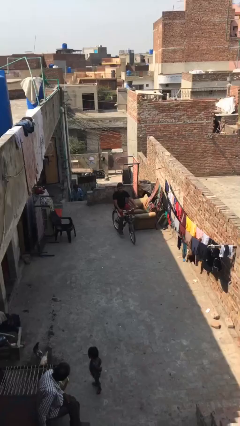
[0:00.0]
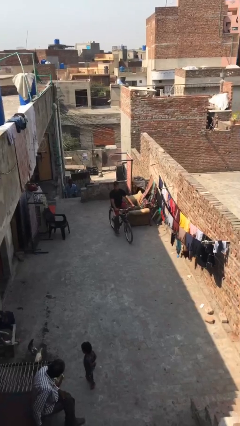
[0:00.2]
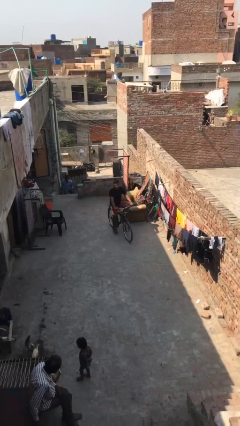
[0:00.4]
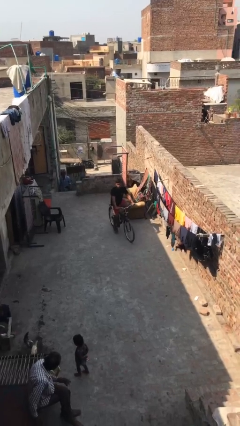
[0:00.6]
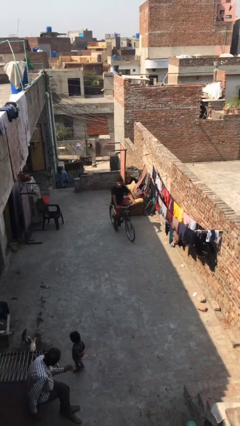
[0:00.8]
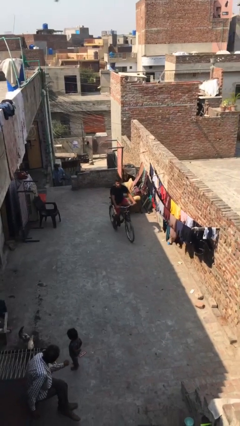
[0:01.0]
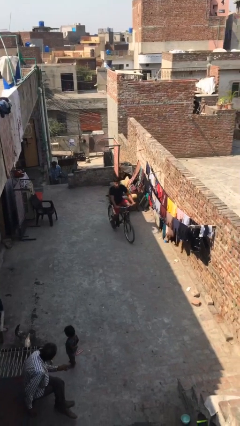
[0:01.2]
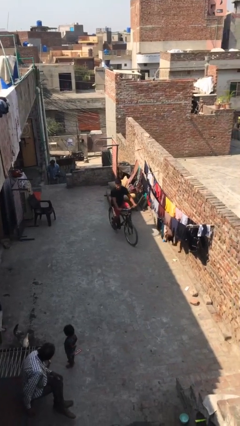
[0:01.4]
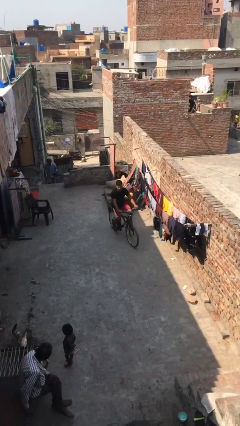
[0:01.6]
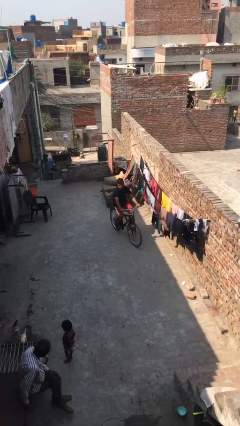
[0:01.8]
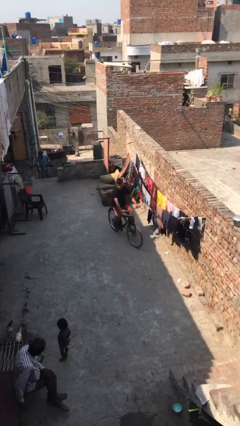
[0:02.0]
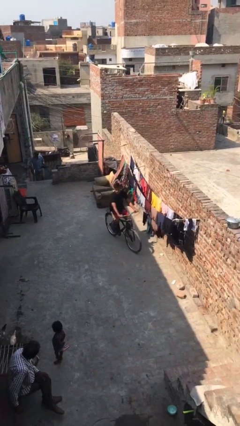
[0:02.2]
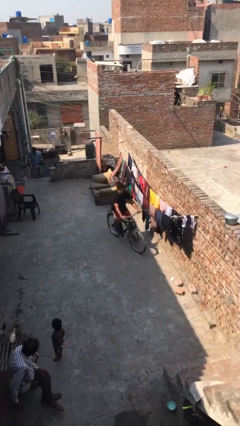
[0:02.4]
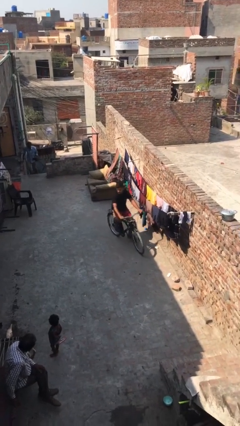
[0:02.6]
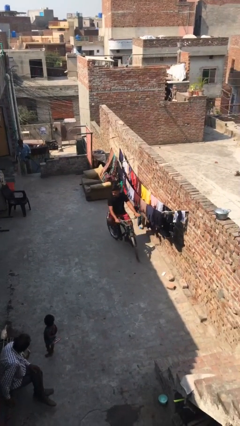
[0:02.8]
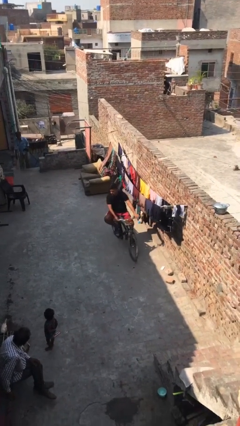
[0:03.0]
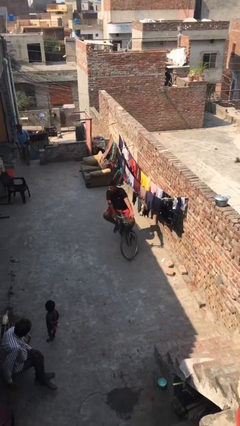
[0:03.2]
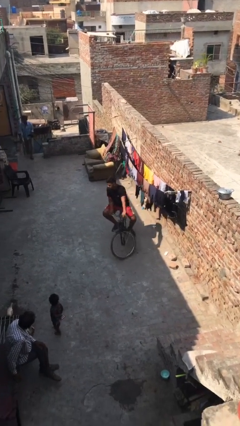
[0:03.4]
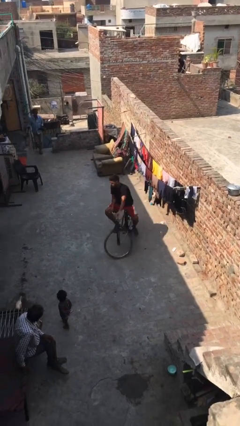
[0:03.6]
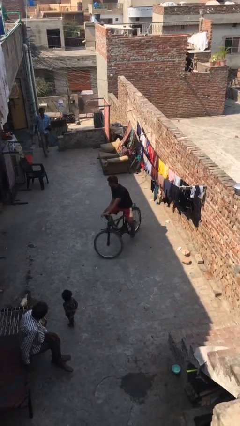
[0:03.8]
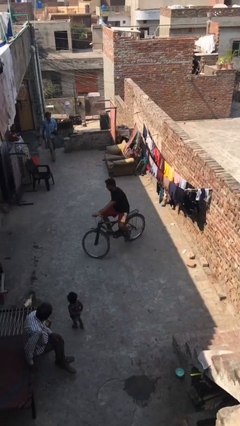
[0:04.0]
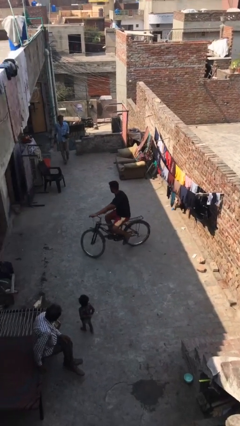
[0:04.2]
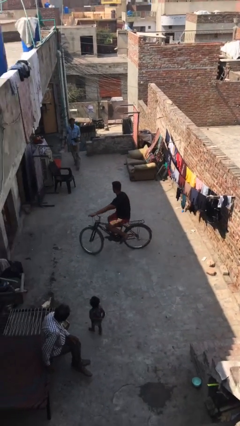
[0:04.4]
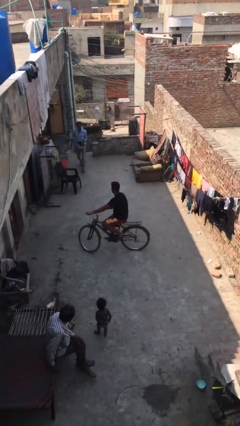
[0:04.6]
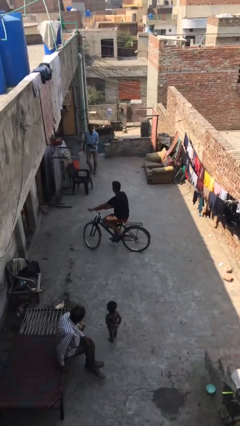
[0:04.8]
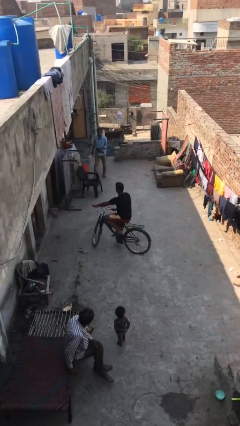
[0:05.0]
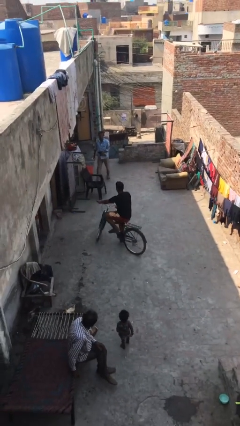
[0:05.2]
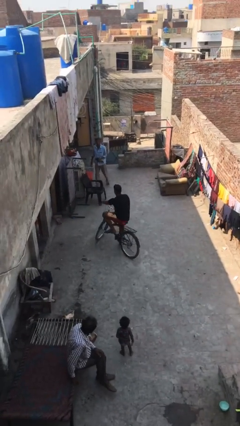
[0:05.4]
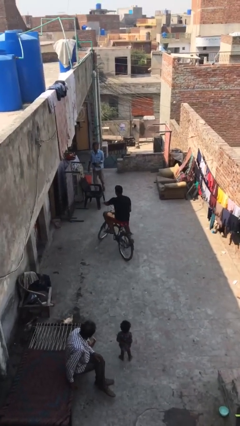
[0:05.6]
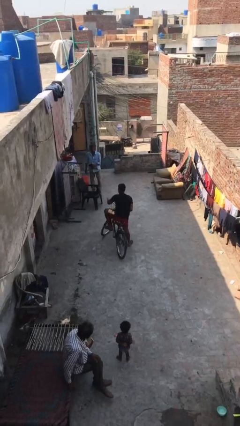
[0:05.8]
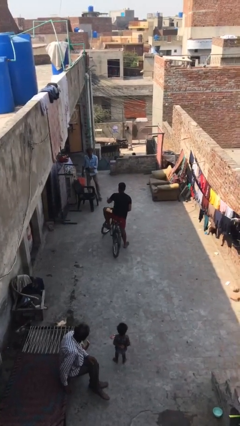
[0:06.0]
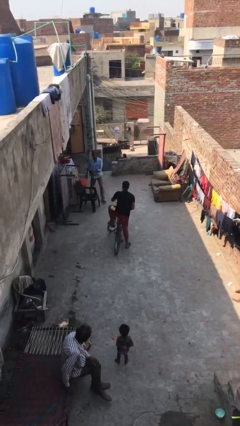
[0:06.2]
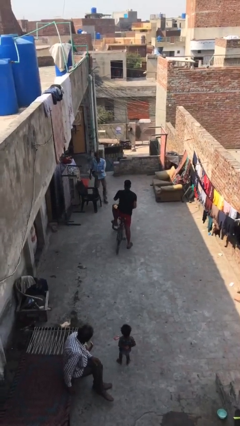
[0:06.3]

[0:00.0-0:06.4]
person rides bicycle

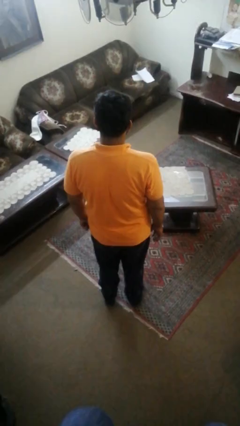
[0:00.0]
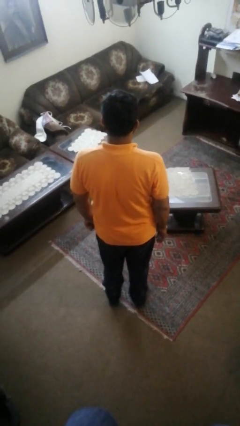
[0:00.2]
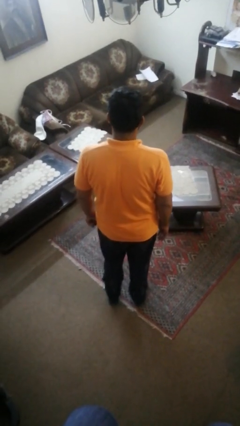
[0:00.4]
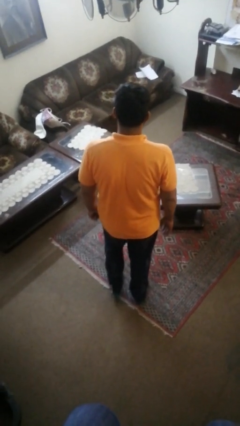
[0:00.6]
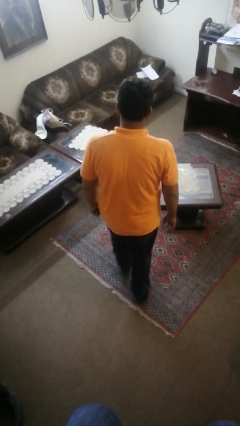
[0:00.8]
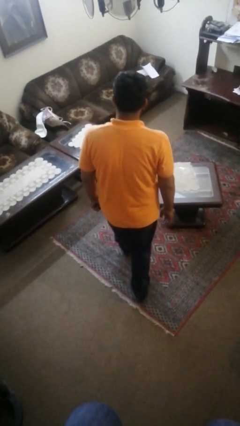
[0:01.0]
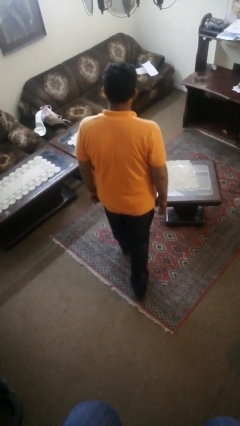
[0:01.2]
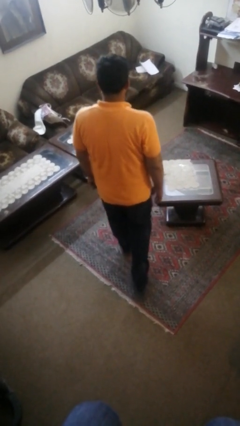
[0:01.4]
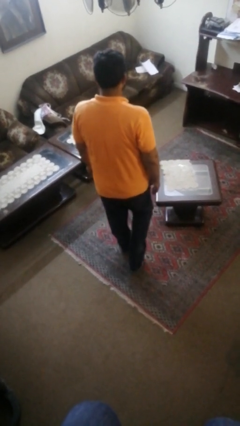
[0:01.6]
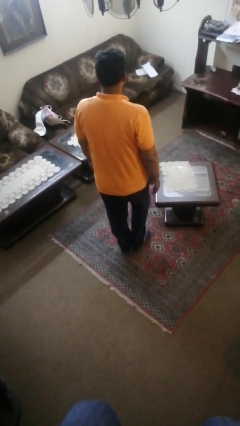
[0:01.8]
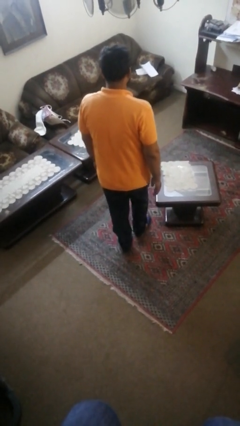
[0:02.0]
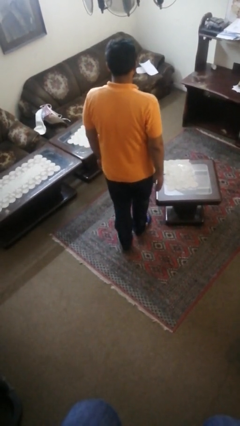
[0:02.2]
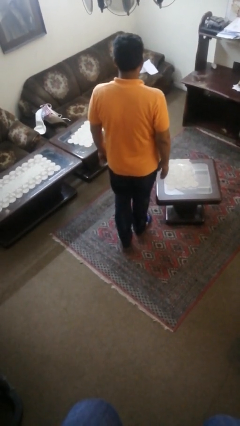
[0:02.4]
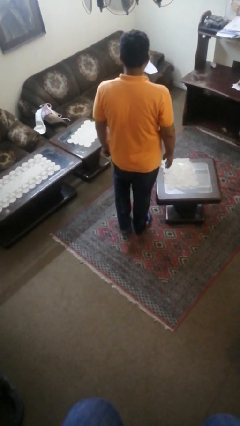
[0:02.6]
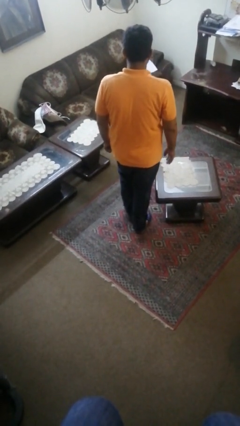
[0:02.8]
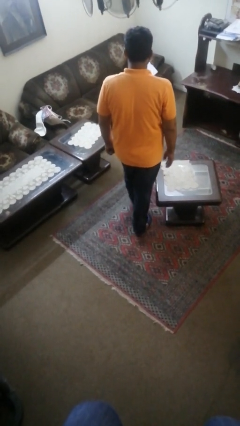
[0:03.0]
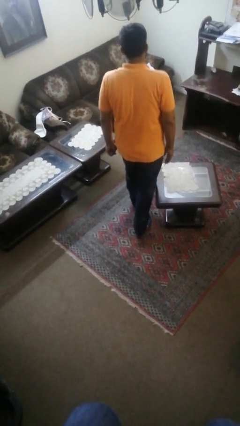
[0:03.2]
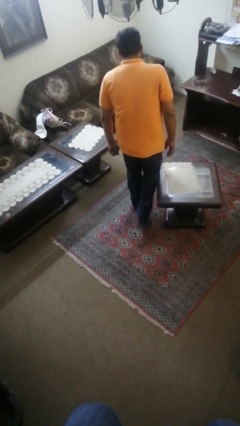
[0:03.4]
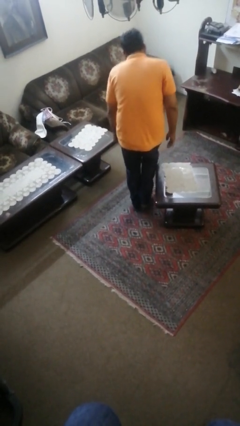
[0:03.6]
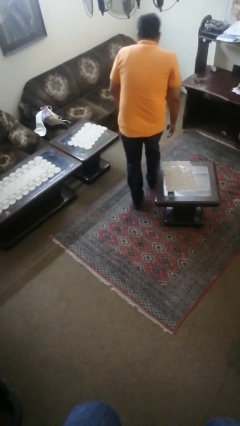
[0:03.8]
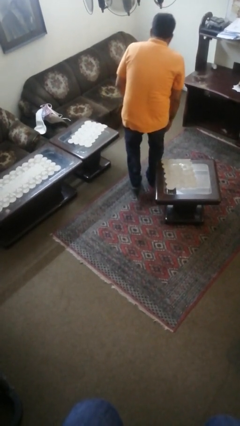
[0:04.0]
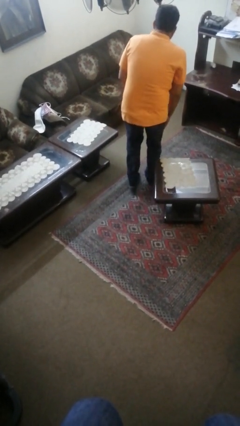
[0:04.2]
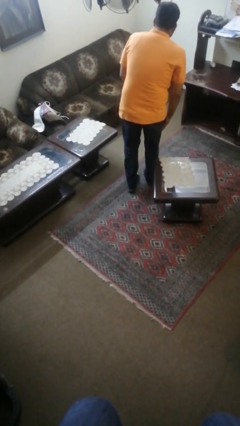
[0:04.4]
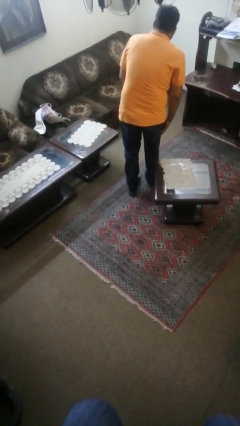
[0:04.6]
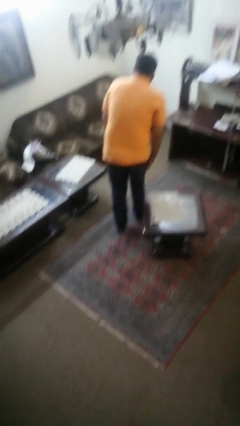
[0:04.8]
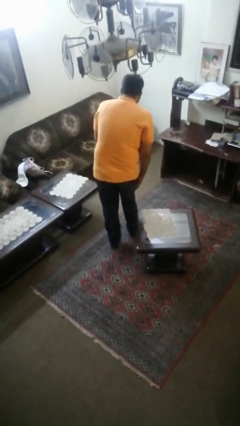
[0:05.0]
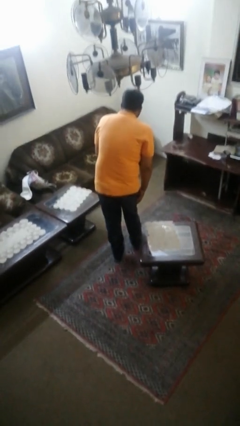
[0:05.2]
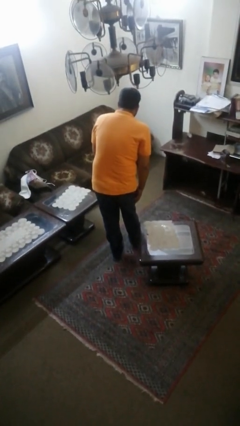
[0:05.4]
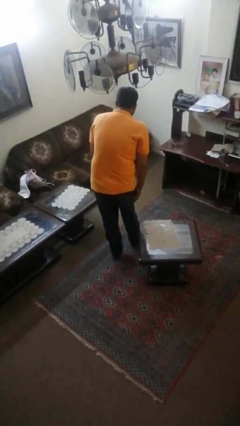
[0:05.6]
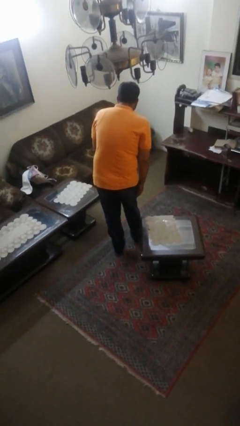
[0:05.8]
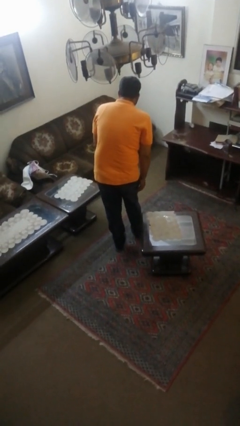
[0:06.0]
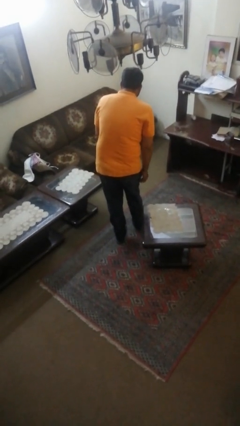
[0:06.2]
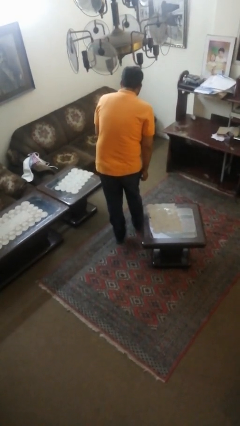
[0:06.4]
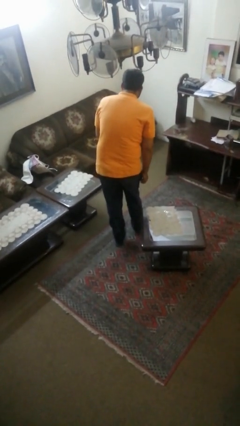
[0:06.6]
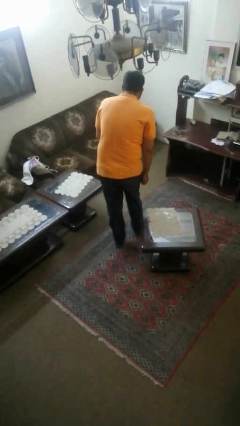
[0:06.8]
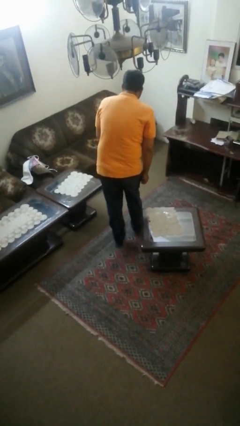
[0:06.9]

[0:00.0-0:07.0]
person bumps into table

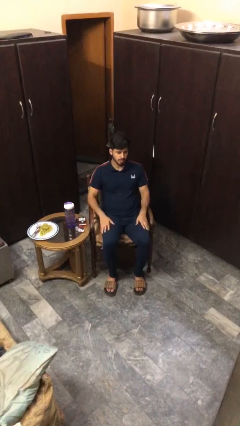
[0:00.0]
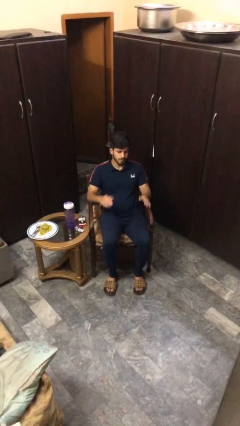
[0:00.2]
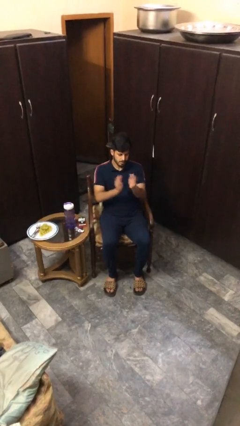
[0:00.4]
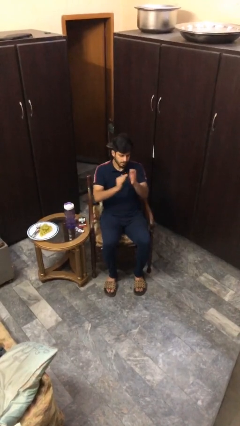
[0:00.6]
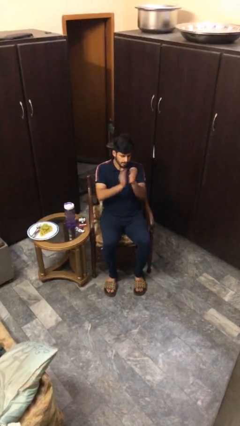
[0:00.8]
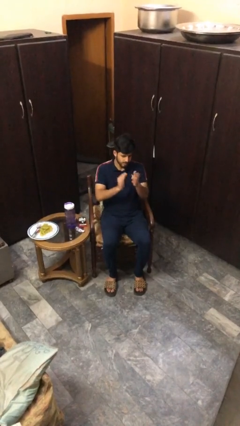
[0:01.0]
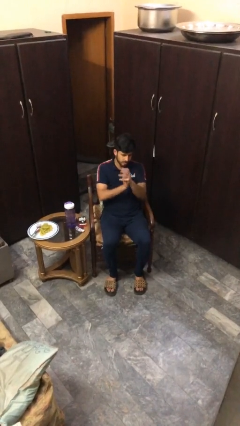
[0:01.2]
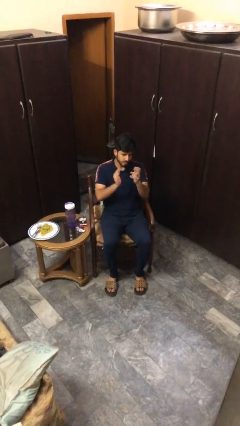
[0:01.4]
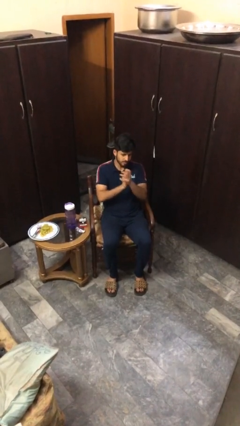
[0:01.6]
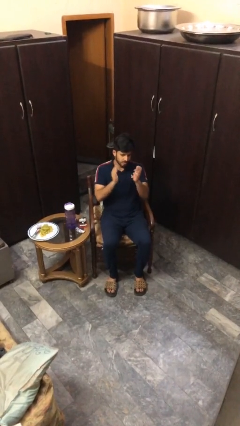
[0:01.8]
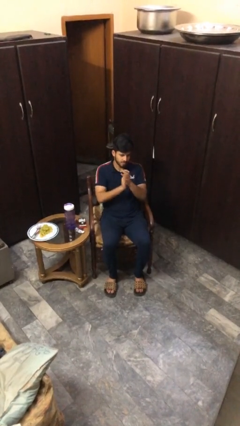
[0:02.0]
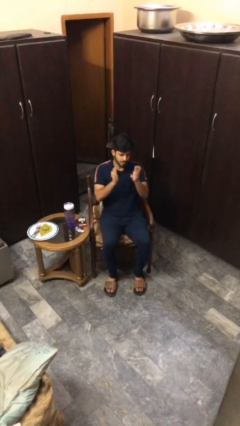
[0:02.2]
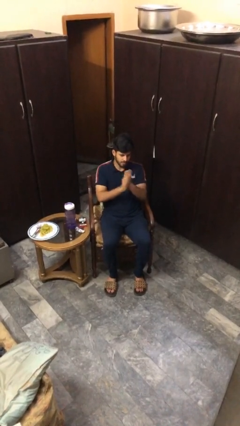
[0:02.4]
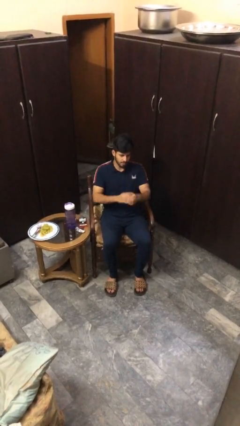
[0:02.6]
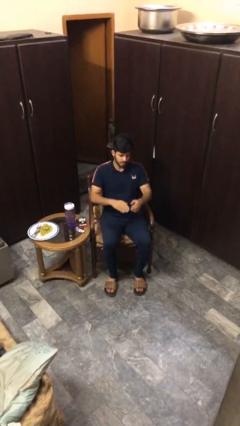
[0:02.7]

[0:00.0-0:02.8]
person claps hands

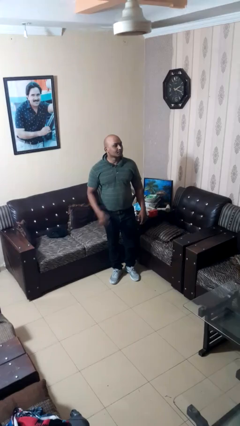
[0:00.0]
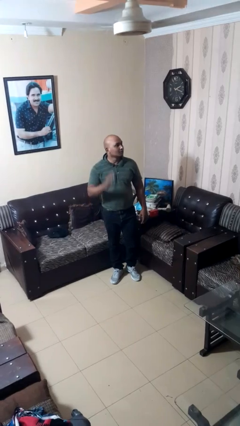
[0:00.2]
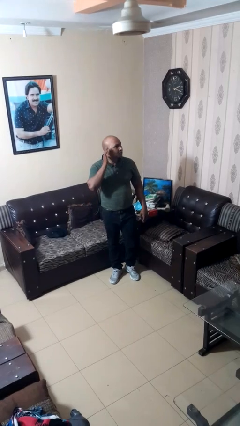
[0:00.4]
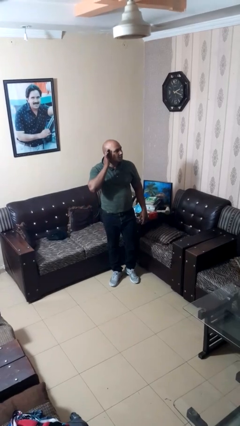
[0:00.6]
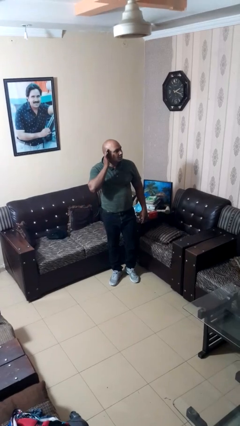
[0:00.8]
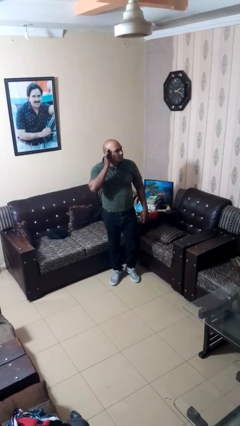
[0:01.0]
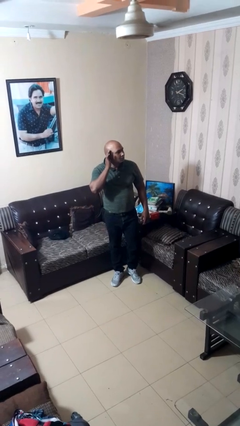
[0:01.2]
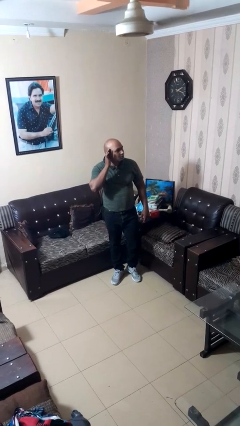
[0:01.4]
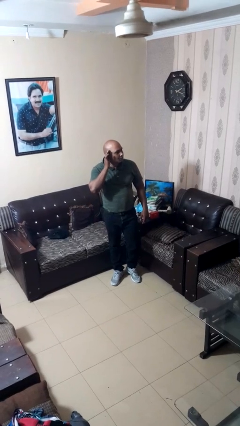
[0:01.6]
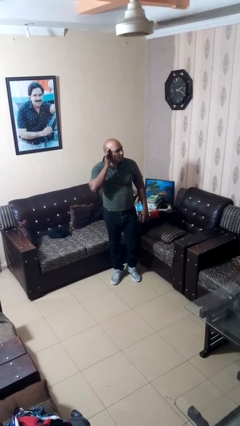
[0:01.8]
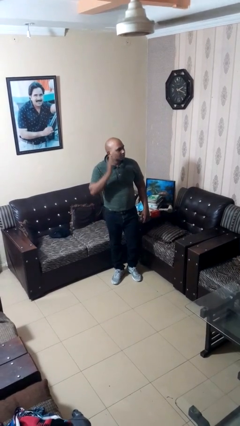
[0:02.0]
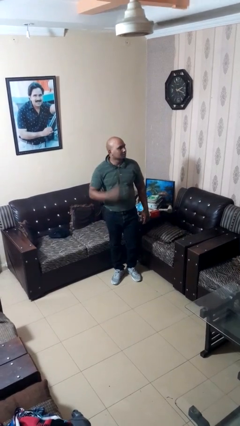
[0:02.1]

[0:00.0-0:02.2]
person gestures listen closely
